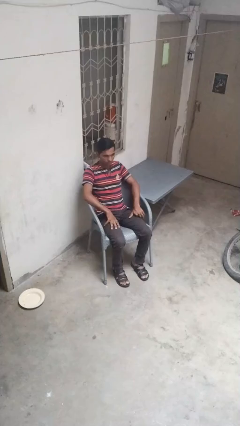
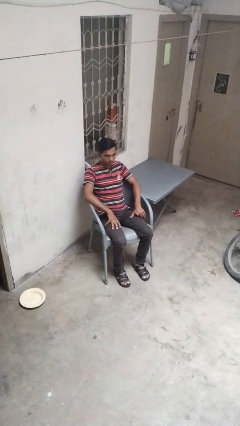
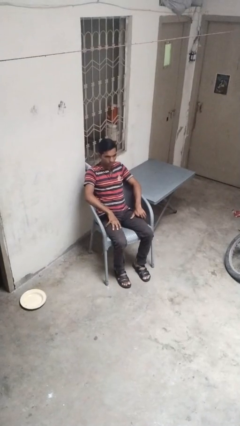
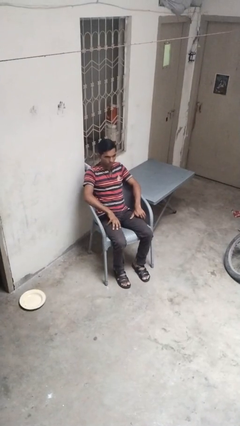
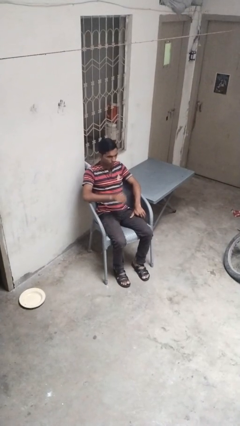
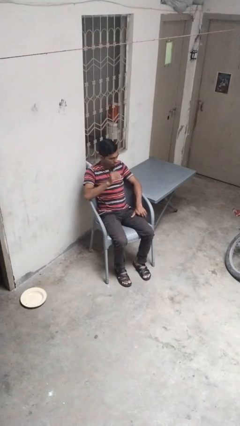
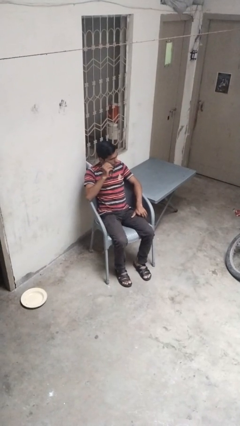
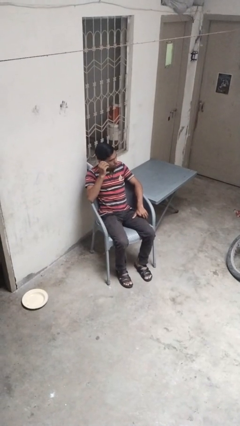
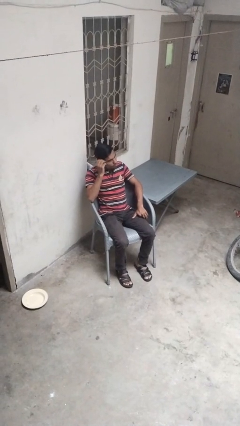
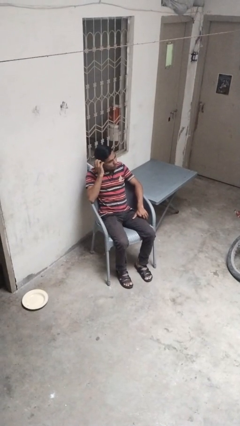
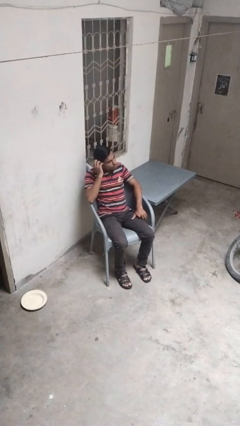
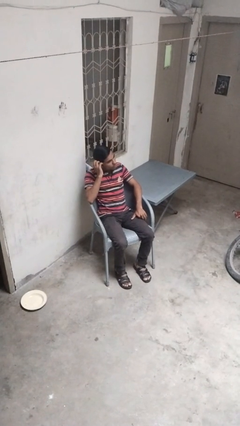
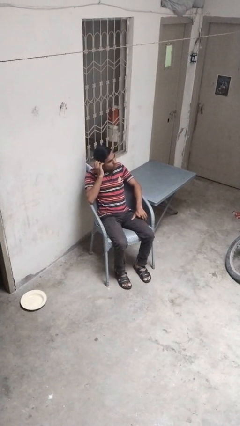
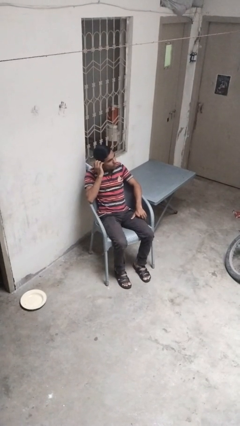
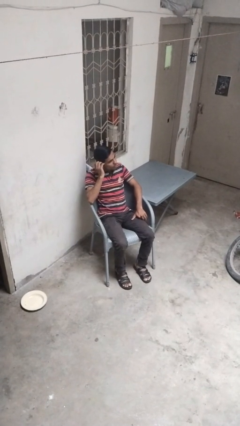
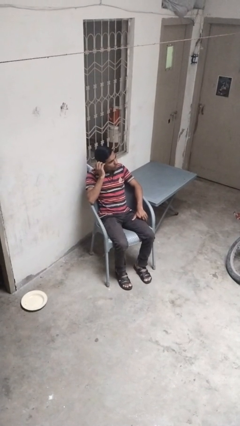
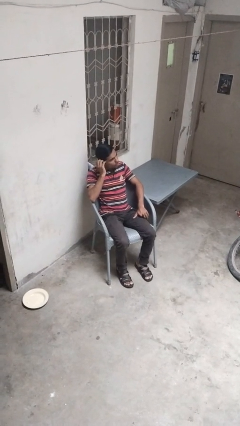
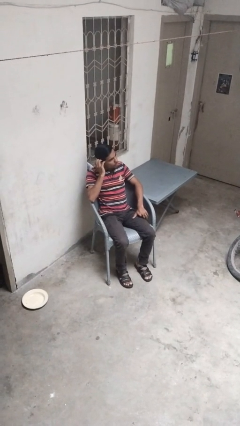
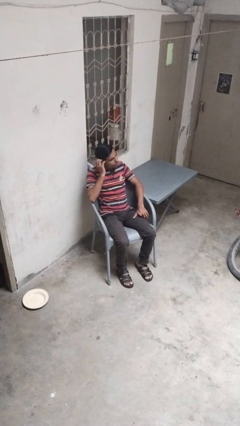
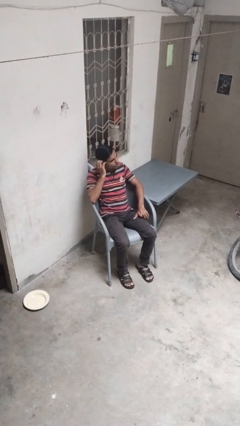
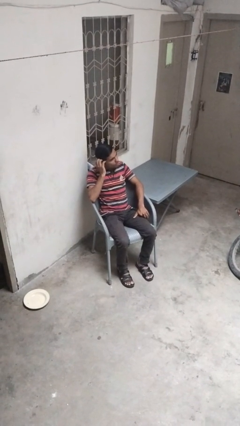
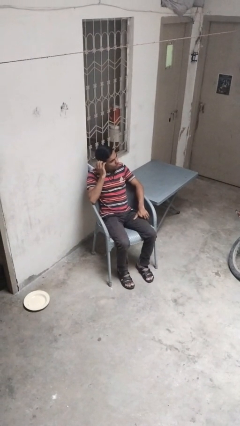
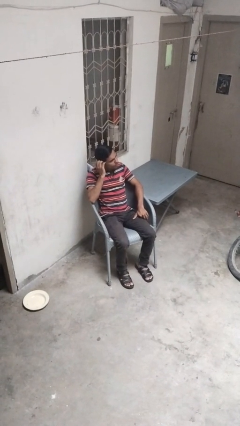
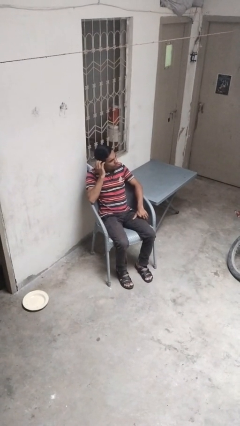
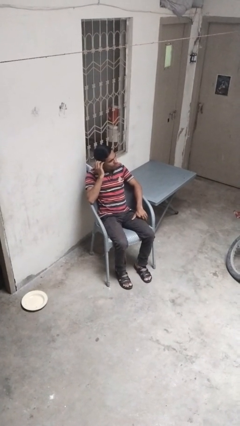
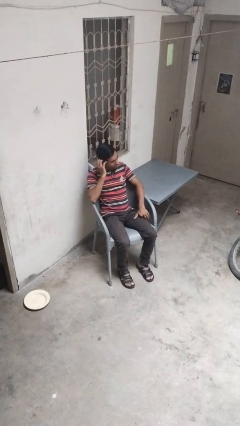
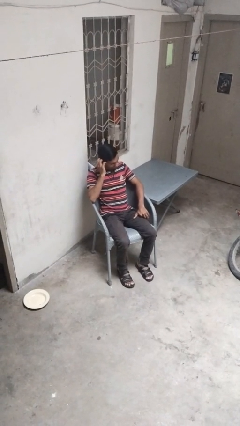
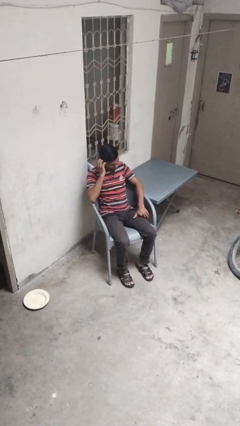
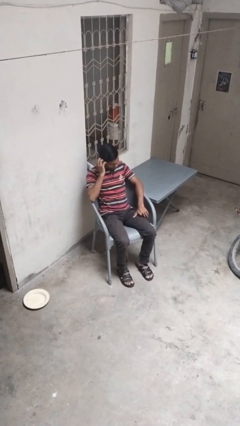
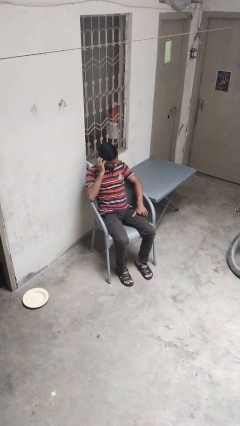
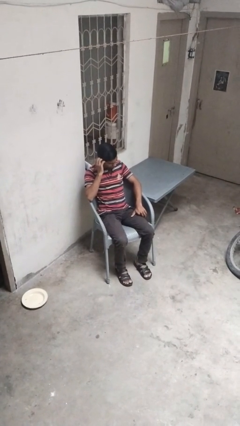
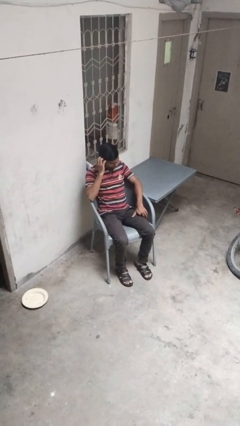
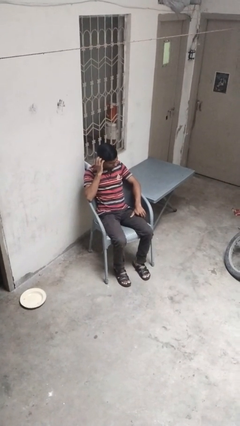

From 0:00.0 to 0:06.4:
person strokes hair

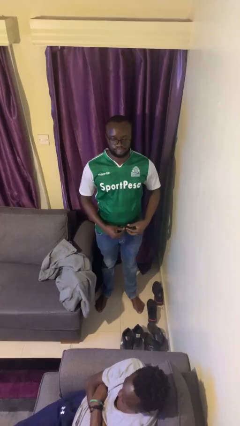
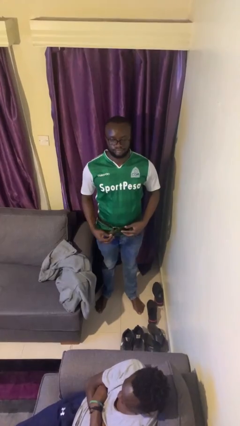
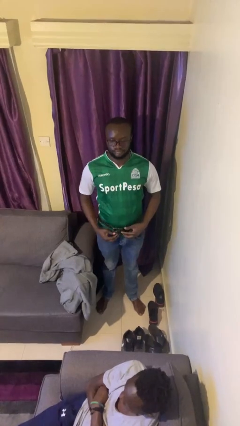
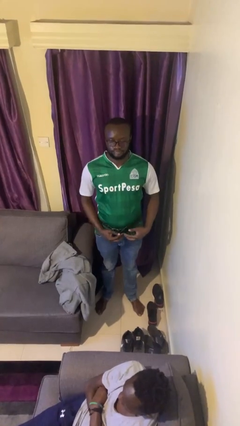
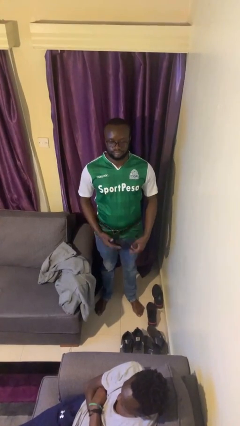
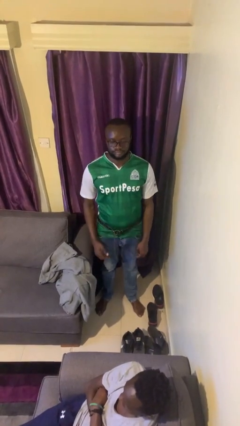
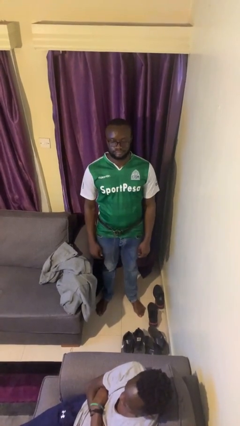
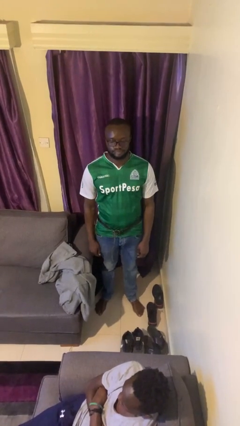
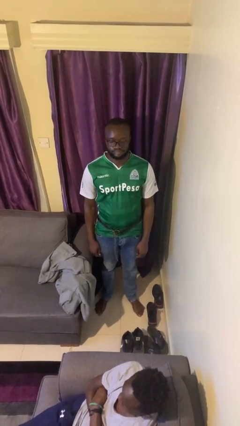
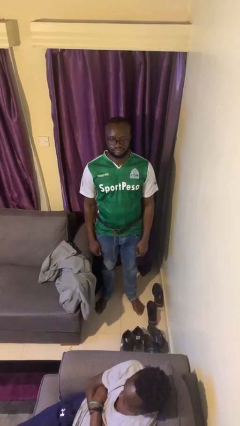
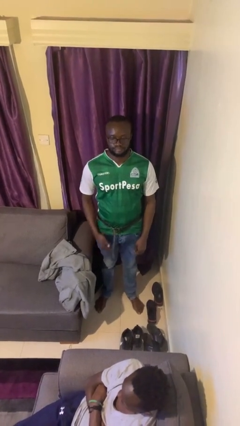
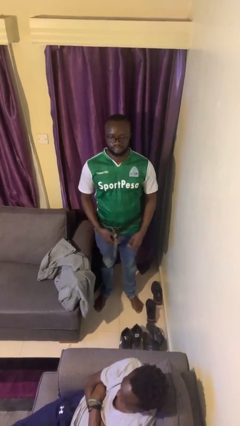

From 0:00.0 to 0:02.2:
person takes off belt

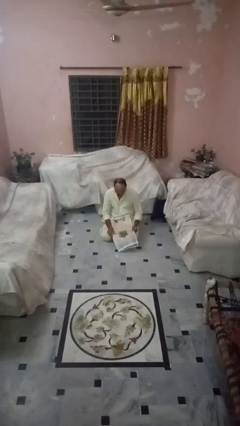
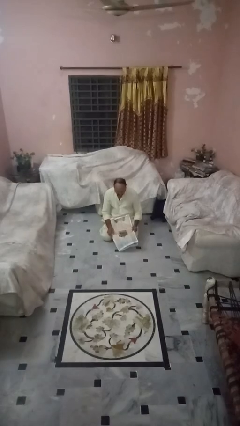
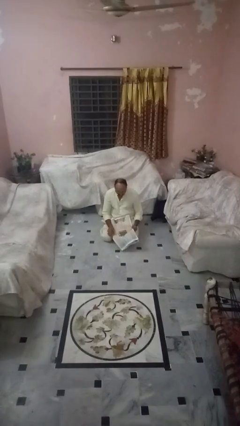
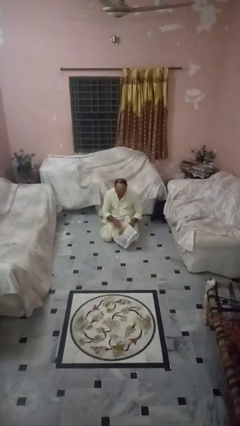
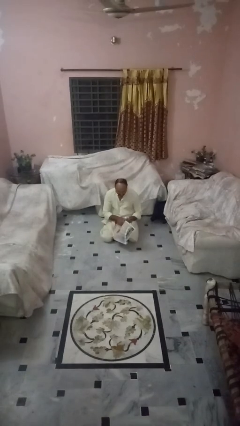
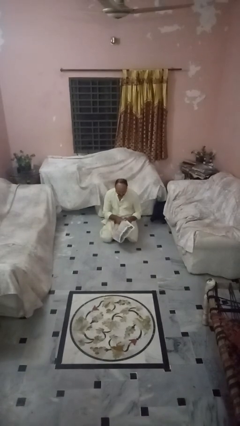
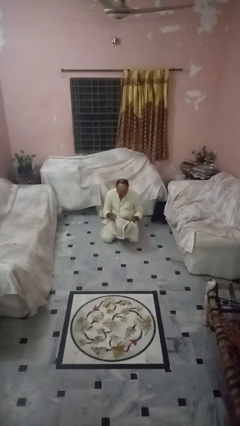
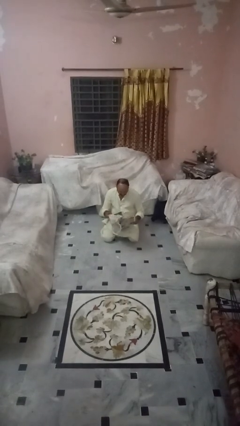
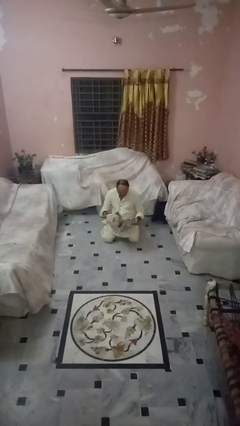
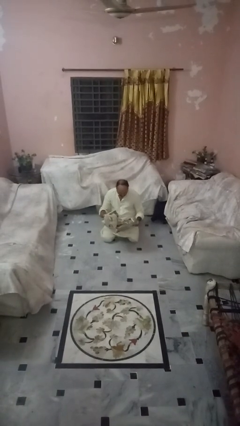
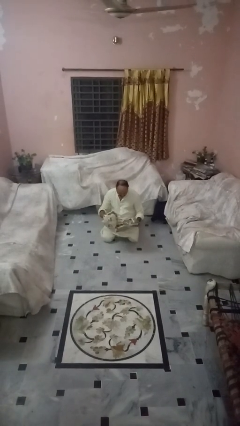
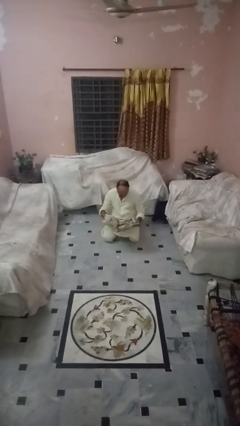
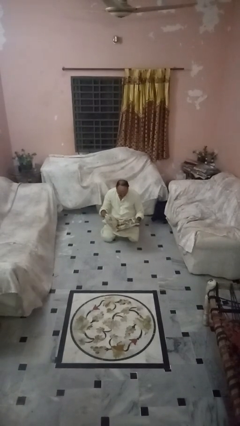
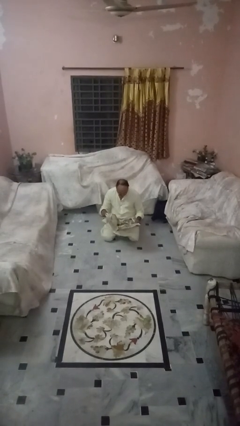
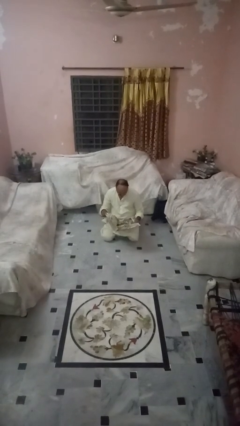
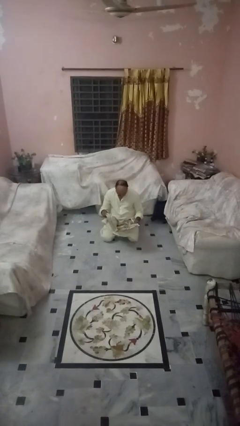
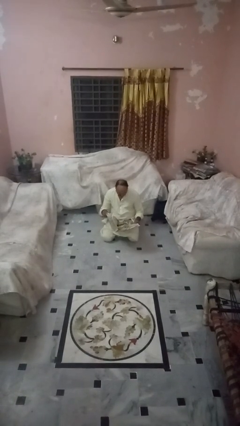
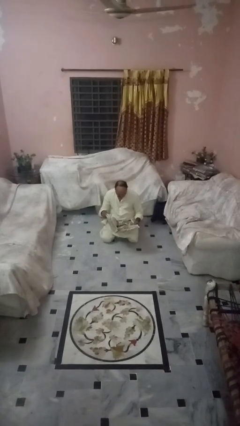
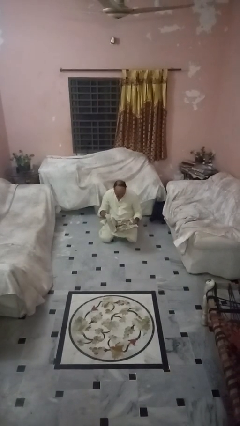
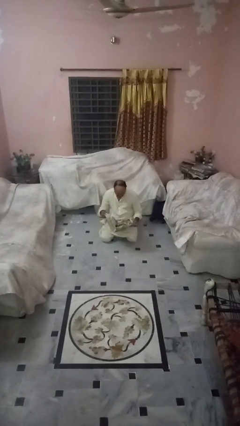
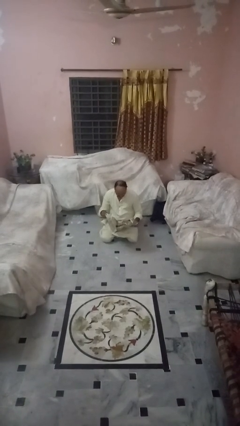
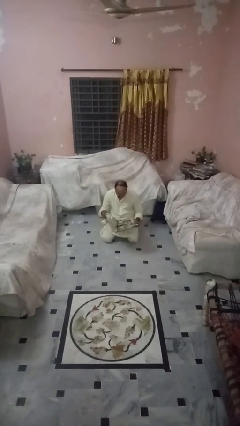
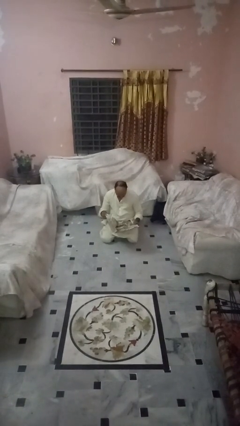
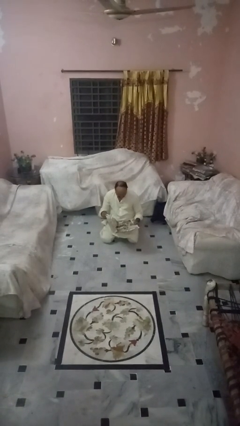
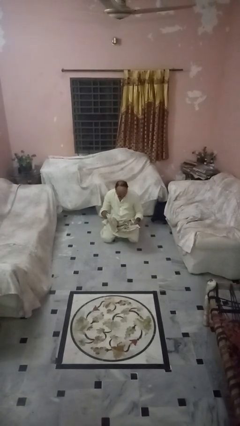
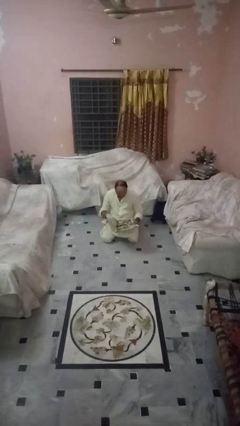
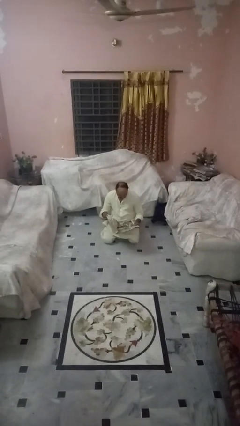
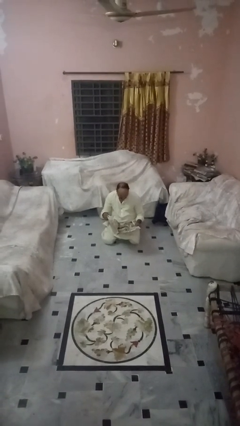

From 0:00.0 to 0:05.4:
person reads newspaper

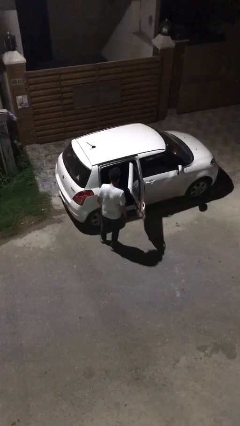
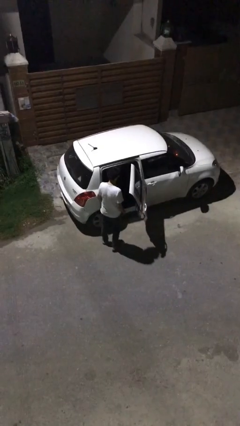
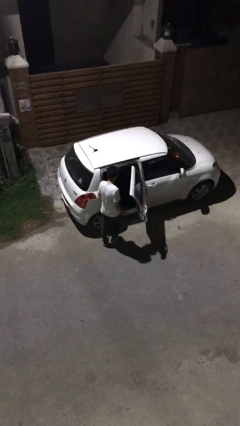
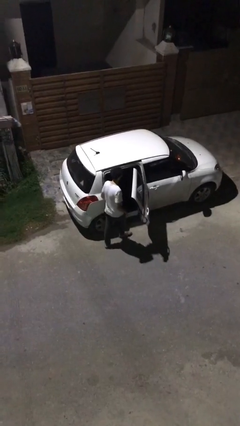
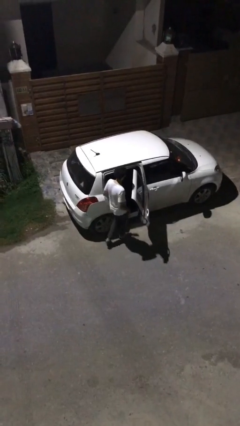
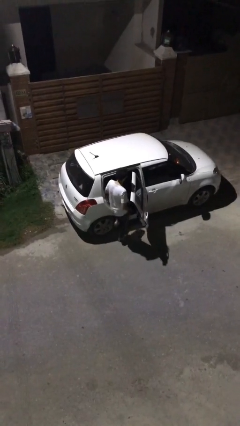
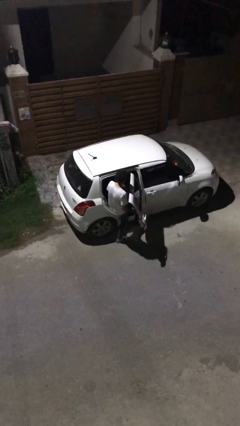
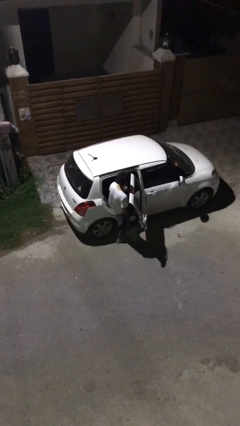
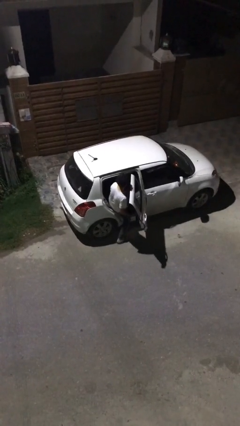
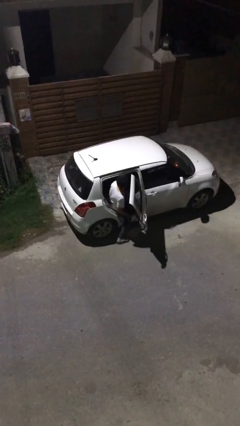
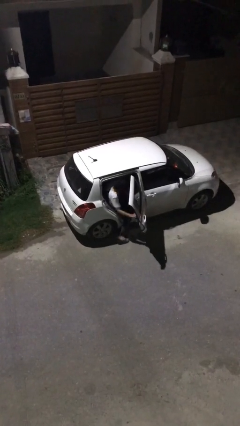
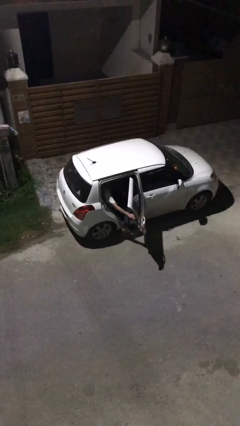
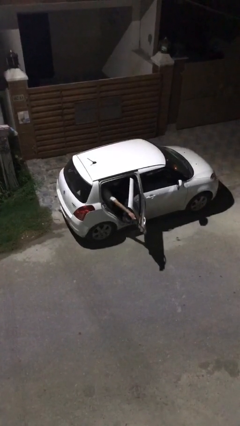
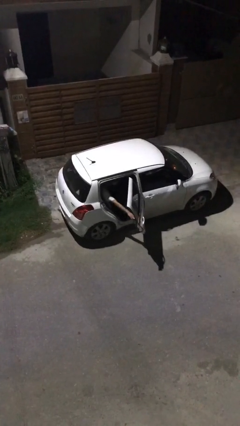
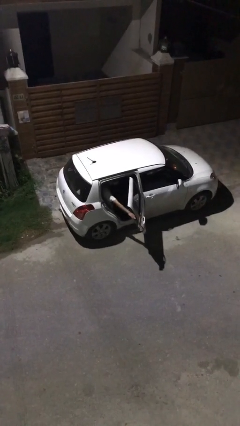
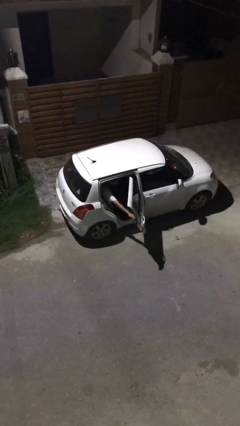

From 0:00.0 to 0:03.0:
person enters car

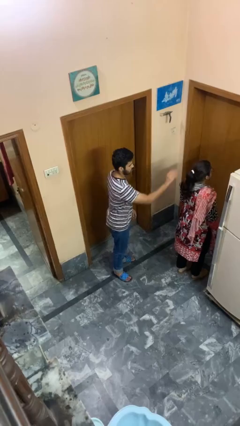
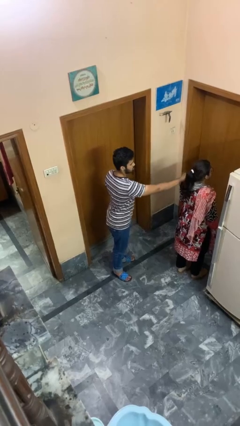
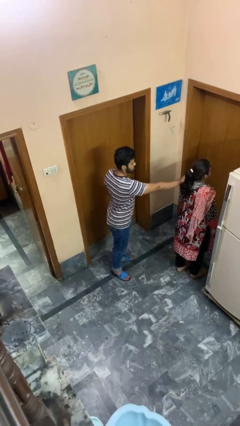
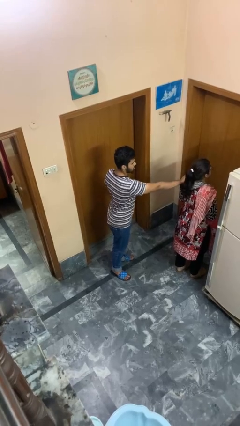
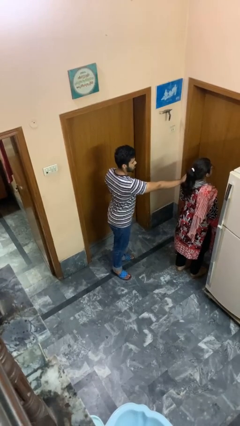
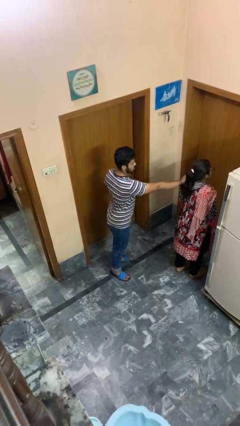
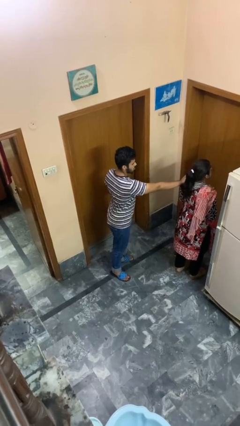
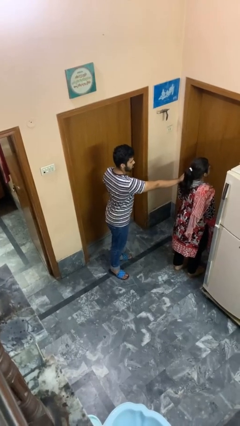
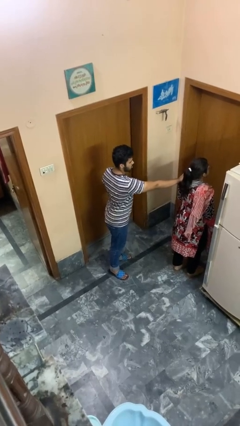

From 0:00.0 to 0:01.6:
person grabs person by shoulder
